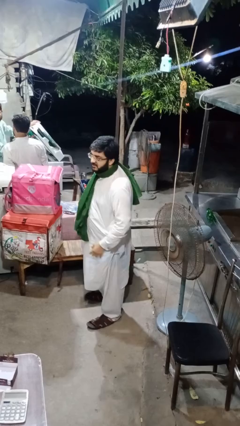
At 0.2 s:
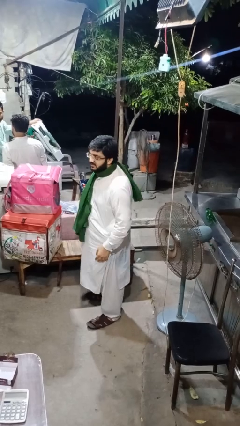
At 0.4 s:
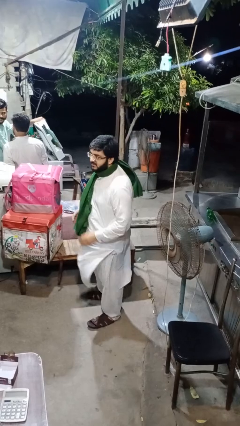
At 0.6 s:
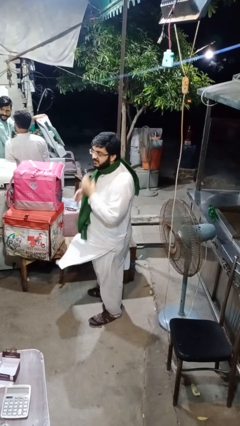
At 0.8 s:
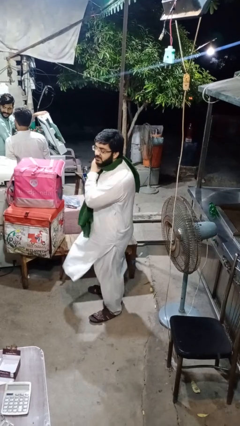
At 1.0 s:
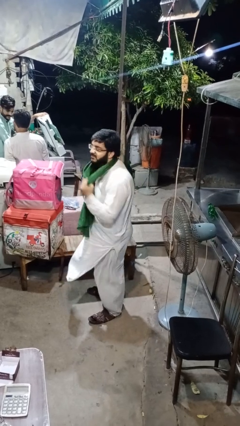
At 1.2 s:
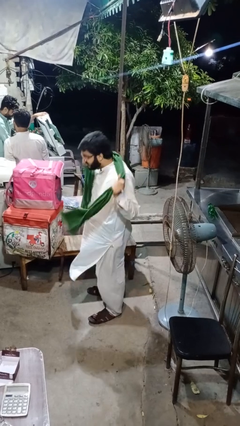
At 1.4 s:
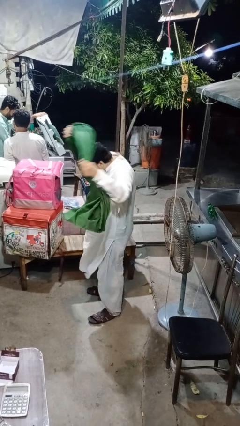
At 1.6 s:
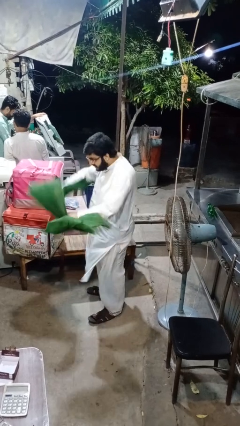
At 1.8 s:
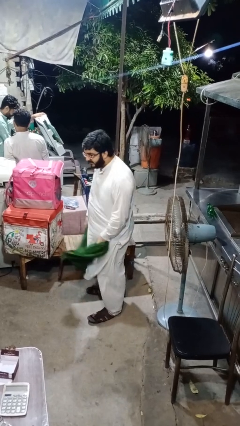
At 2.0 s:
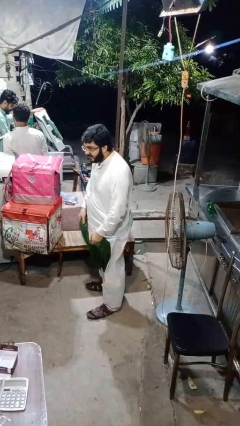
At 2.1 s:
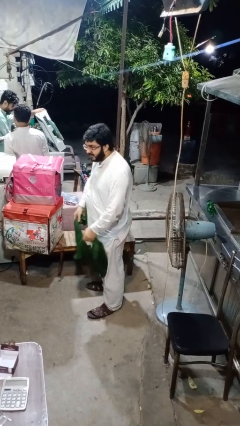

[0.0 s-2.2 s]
person takes off scarf

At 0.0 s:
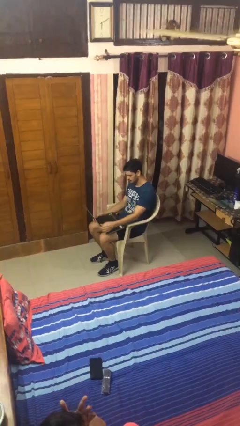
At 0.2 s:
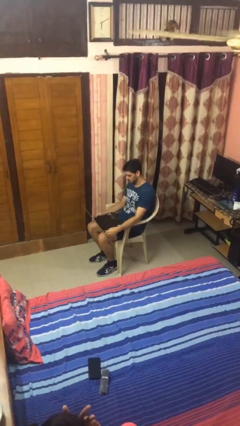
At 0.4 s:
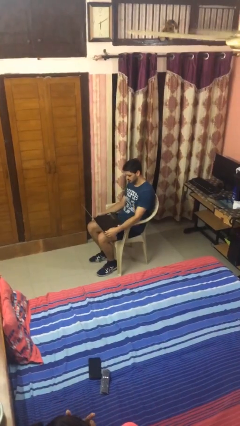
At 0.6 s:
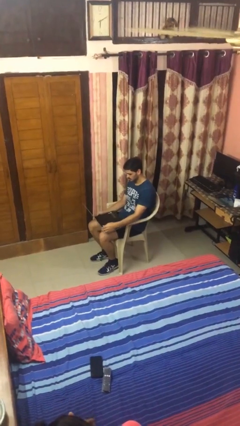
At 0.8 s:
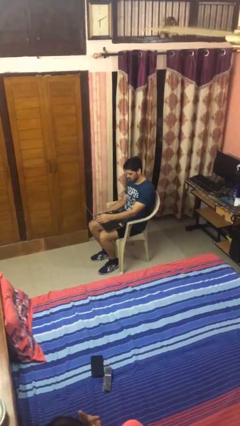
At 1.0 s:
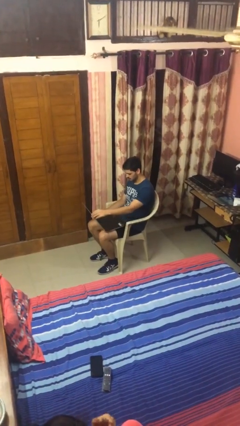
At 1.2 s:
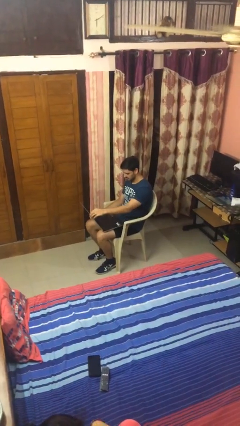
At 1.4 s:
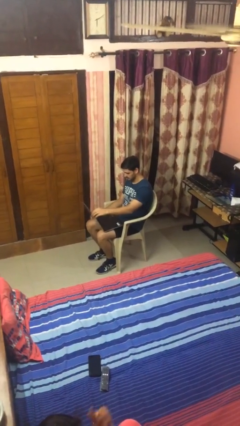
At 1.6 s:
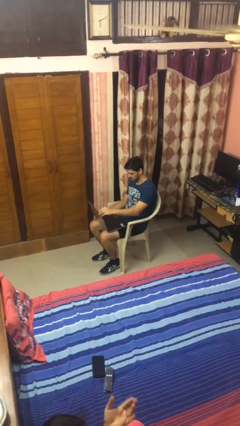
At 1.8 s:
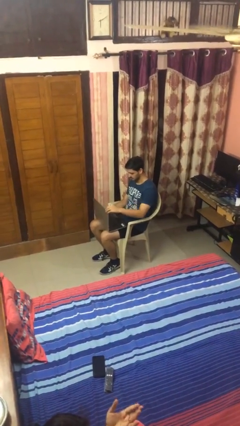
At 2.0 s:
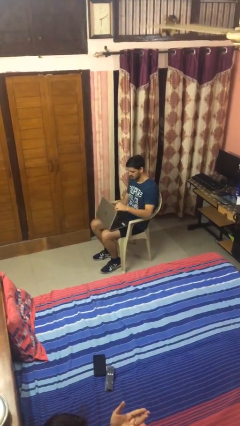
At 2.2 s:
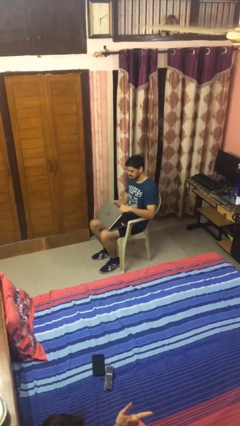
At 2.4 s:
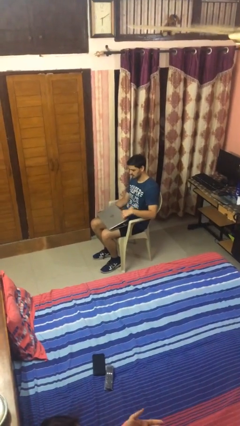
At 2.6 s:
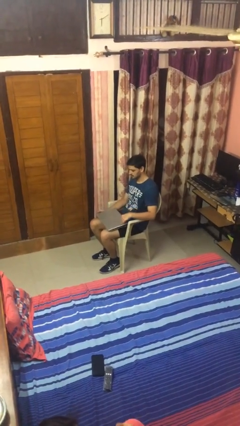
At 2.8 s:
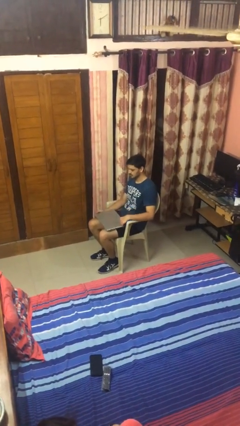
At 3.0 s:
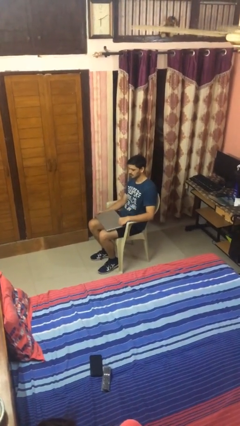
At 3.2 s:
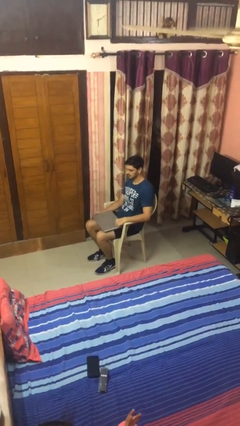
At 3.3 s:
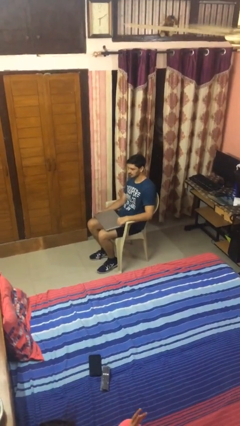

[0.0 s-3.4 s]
person closes laptop

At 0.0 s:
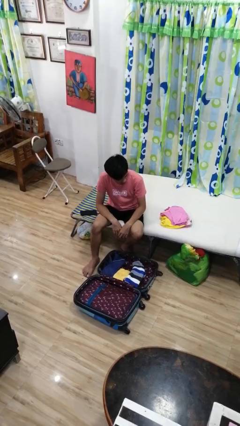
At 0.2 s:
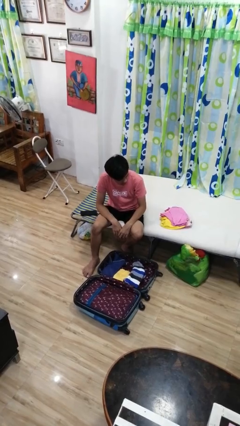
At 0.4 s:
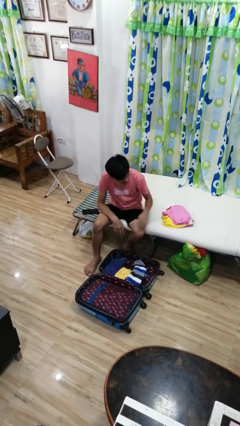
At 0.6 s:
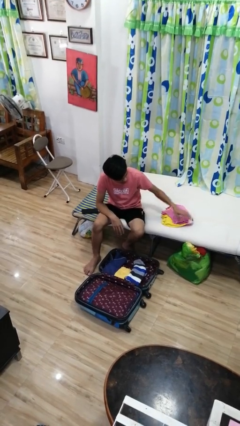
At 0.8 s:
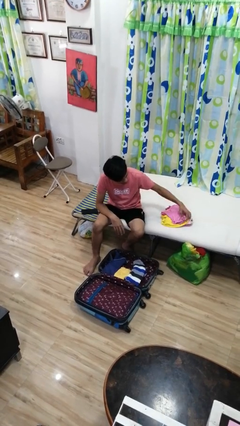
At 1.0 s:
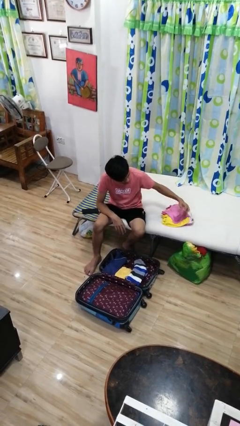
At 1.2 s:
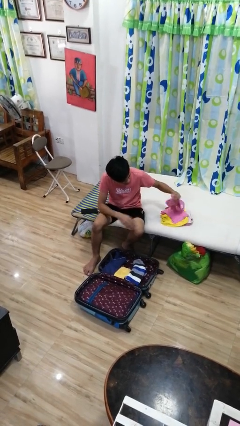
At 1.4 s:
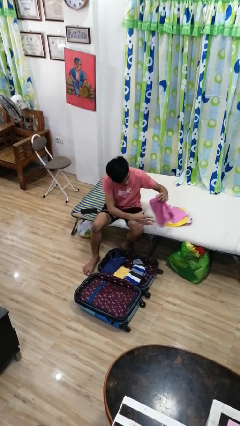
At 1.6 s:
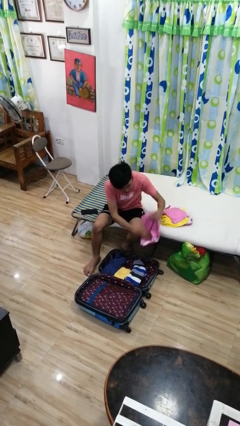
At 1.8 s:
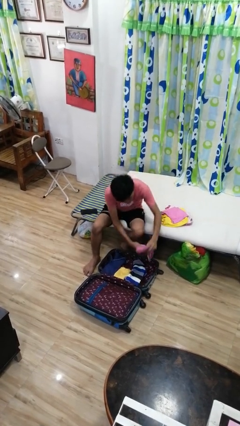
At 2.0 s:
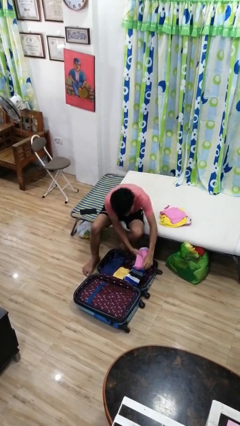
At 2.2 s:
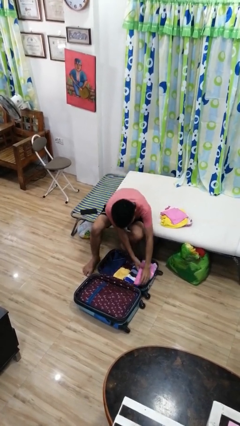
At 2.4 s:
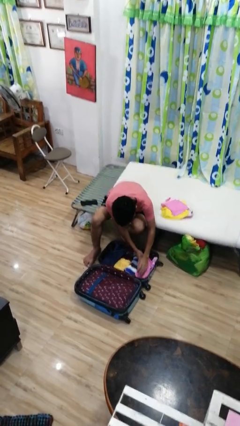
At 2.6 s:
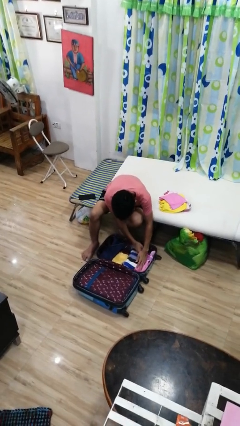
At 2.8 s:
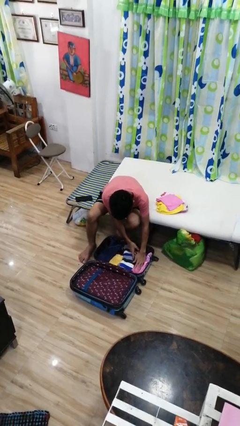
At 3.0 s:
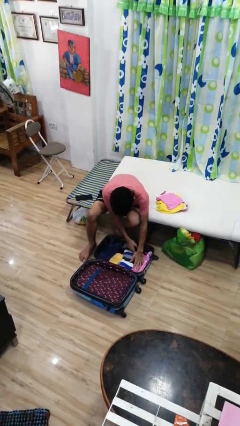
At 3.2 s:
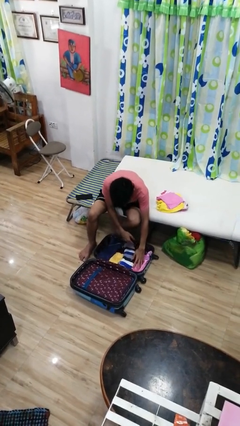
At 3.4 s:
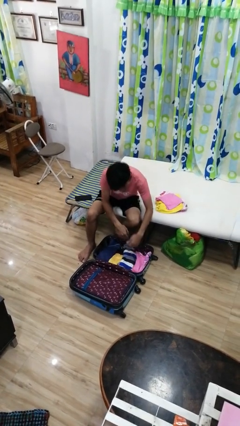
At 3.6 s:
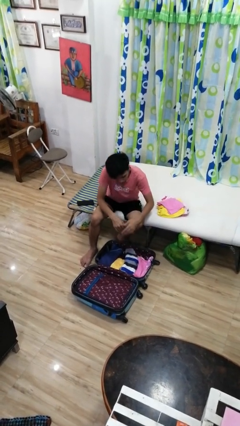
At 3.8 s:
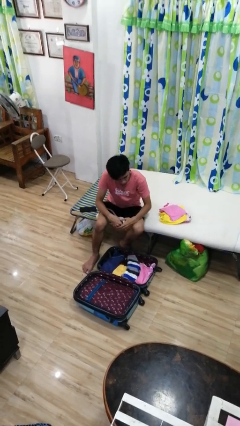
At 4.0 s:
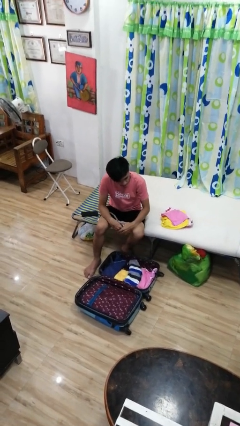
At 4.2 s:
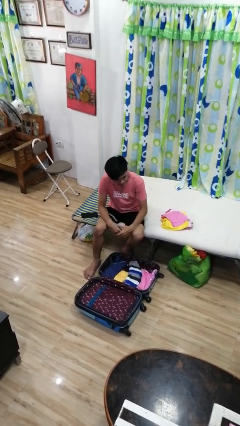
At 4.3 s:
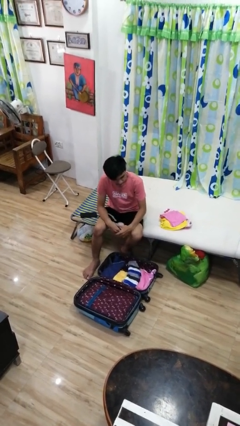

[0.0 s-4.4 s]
person loads clothes into suitcase

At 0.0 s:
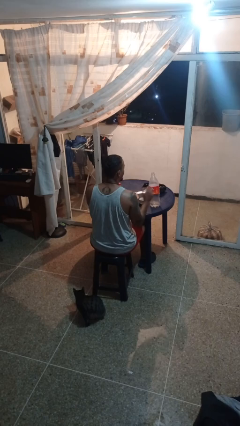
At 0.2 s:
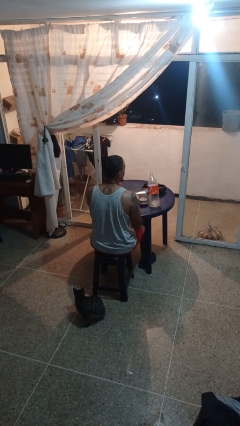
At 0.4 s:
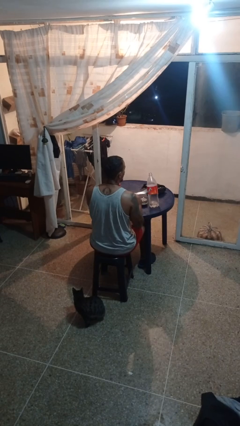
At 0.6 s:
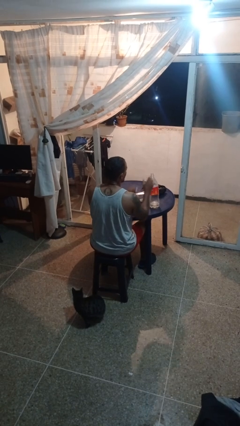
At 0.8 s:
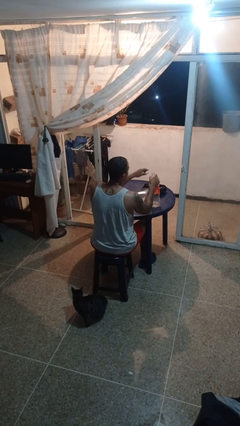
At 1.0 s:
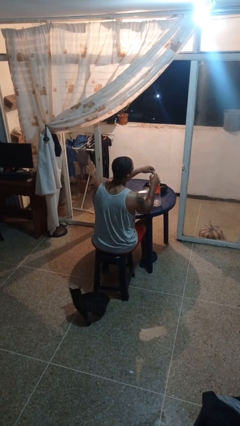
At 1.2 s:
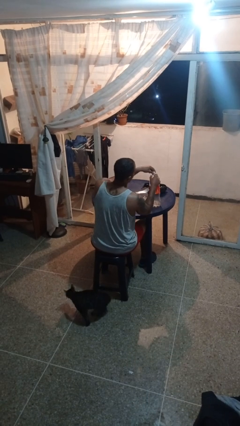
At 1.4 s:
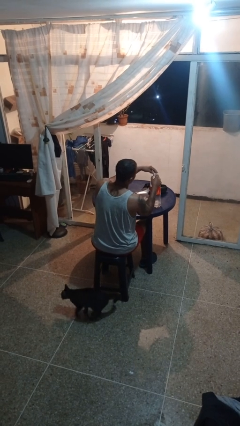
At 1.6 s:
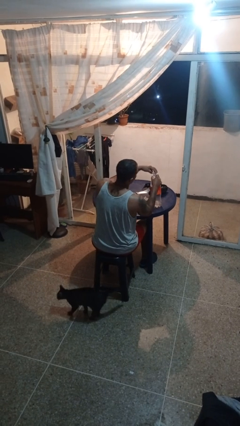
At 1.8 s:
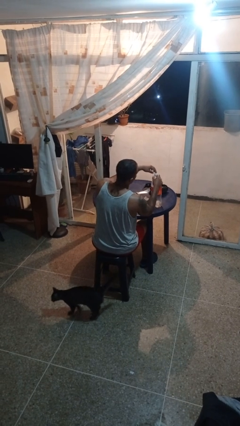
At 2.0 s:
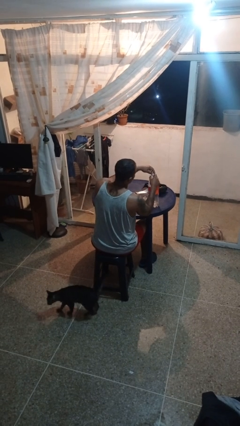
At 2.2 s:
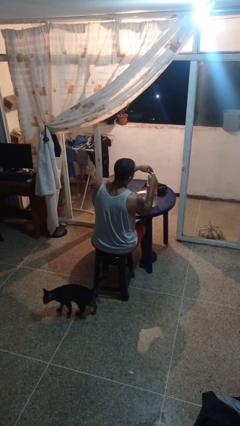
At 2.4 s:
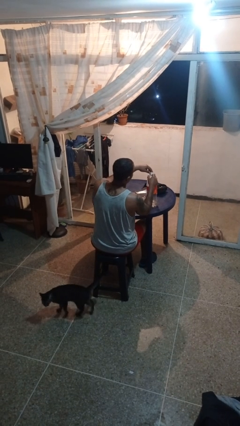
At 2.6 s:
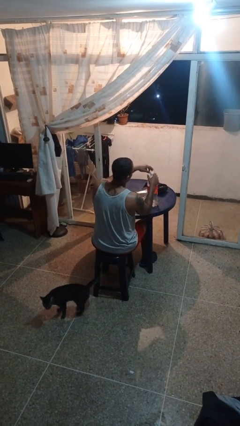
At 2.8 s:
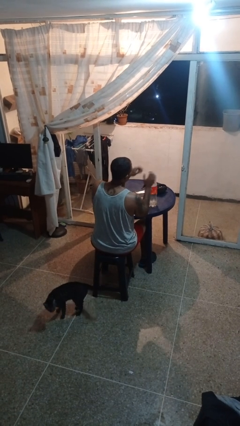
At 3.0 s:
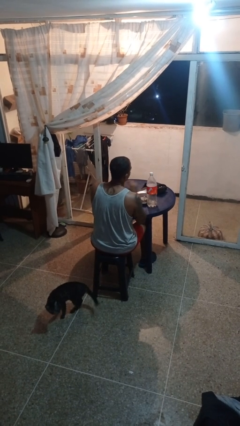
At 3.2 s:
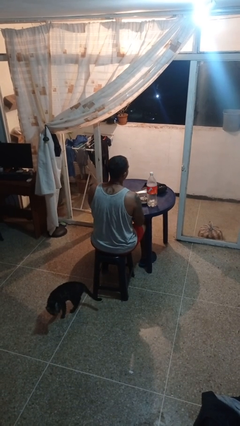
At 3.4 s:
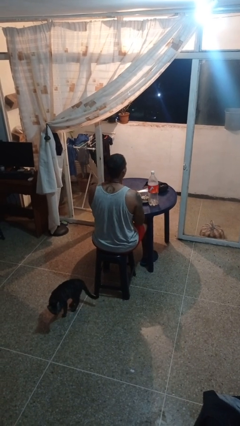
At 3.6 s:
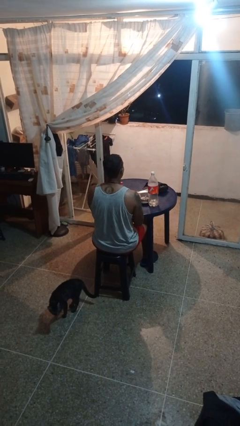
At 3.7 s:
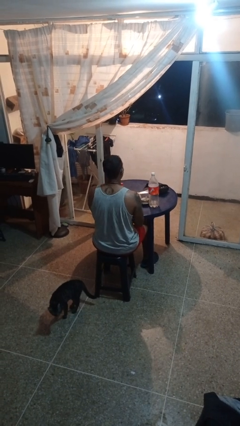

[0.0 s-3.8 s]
person screws lid to bottle

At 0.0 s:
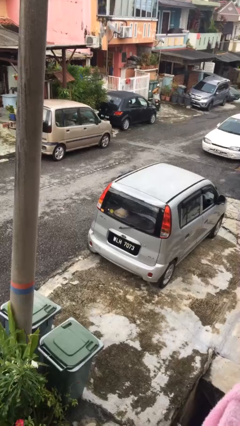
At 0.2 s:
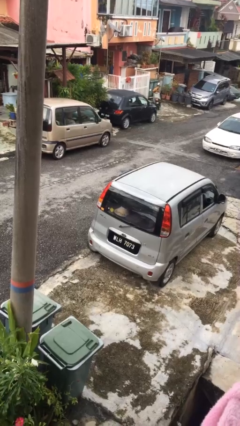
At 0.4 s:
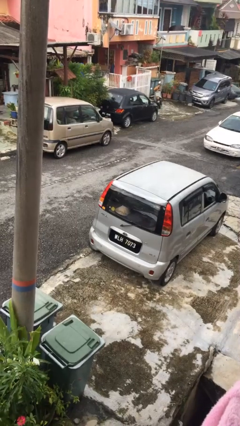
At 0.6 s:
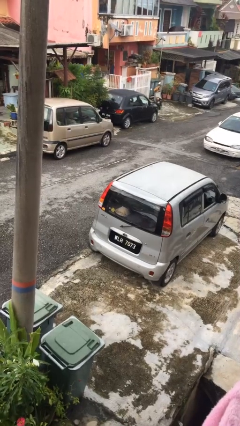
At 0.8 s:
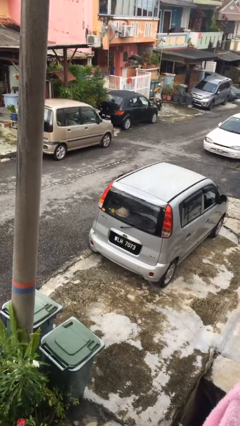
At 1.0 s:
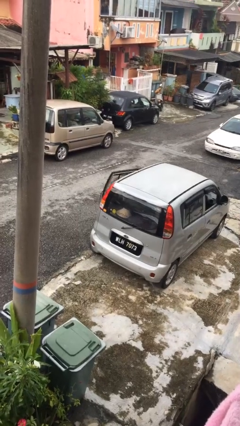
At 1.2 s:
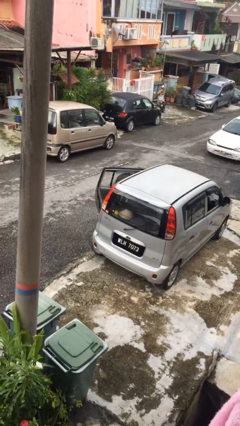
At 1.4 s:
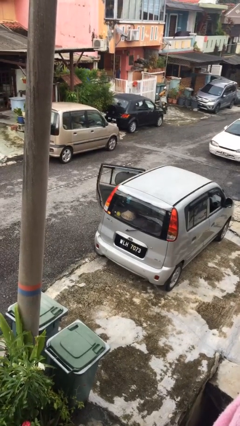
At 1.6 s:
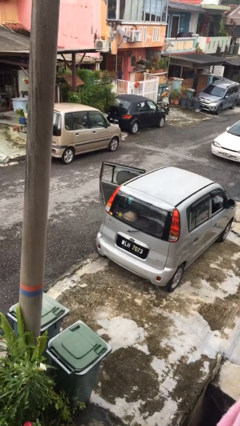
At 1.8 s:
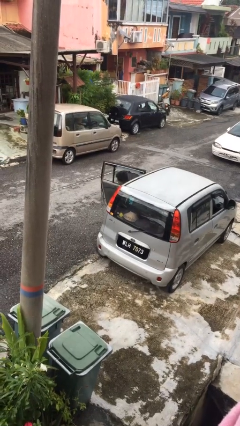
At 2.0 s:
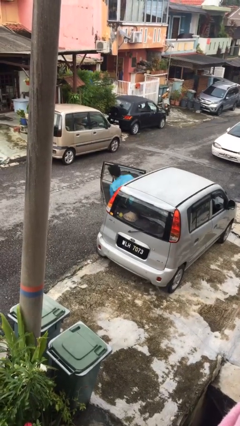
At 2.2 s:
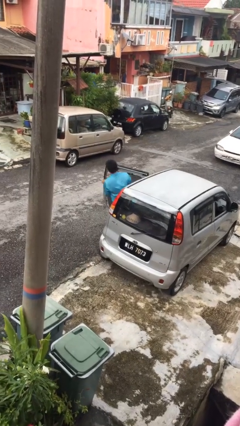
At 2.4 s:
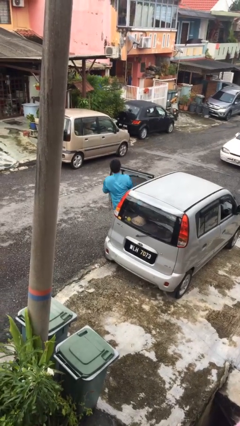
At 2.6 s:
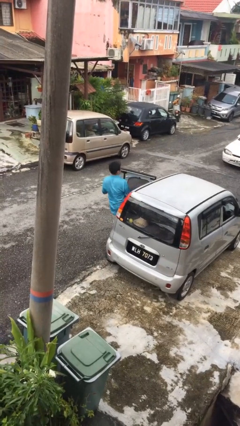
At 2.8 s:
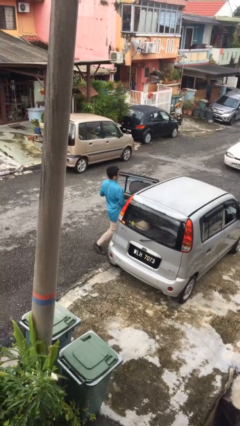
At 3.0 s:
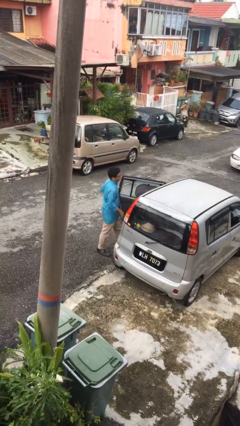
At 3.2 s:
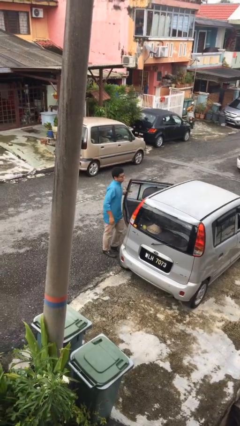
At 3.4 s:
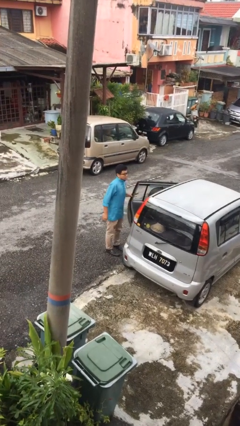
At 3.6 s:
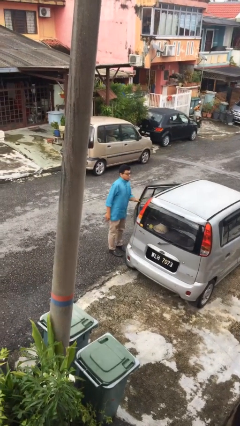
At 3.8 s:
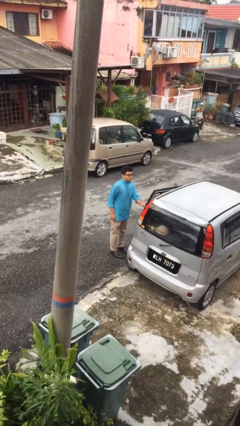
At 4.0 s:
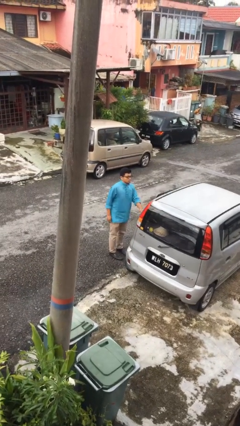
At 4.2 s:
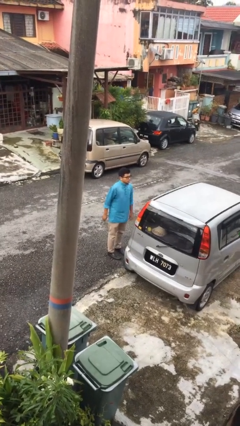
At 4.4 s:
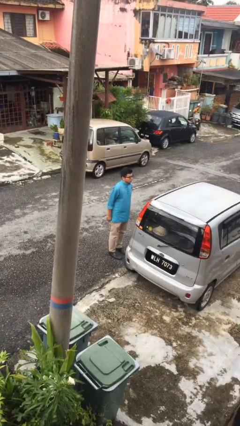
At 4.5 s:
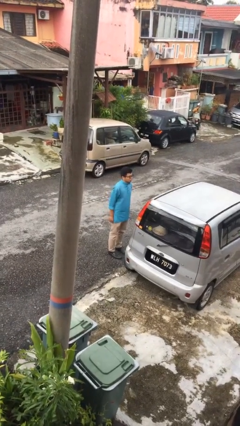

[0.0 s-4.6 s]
person exits car
